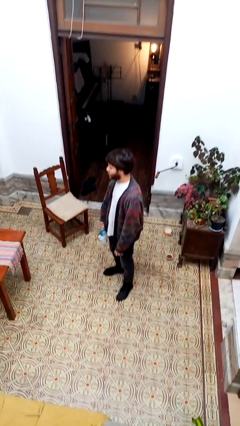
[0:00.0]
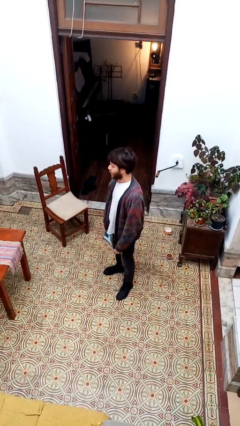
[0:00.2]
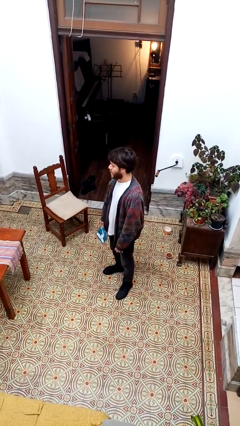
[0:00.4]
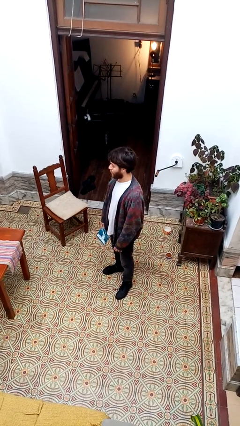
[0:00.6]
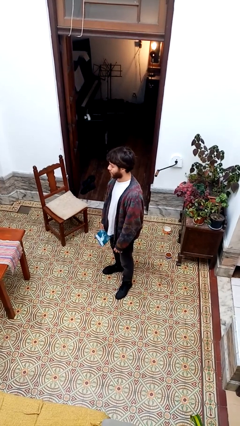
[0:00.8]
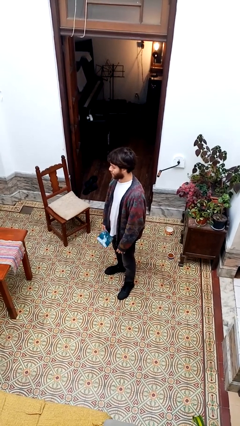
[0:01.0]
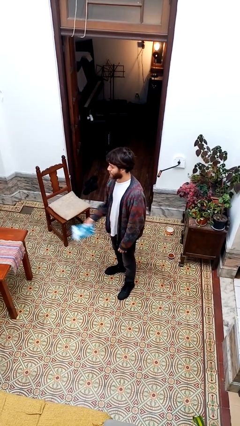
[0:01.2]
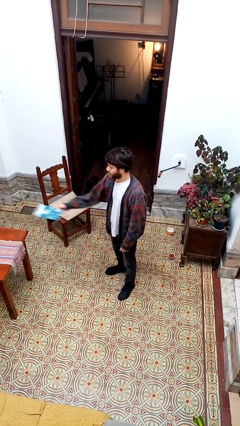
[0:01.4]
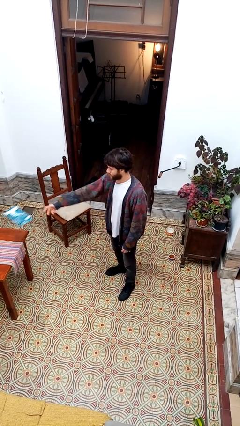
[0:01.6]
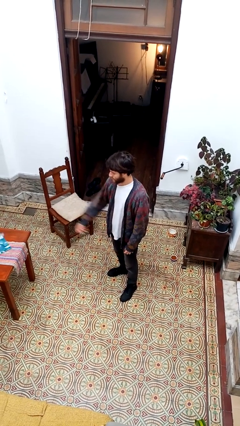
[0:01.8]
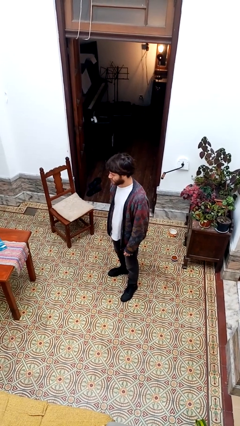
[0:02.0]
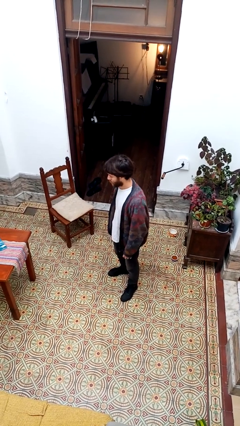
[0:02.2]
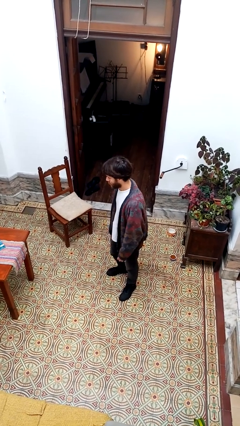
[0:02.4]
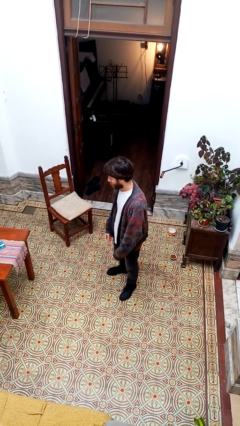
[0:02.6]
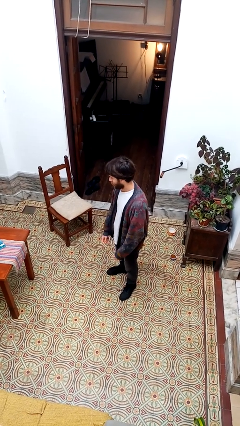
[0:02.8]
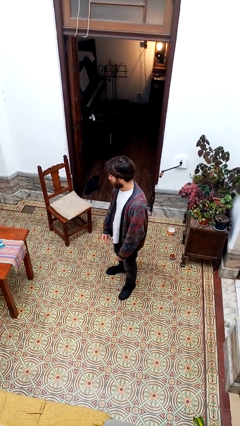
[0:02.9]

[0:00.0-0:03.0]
person throws object on table

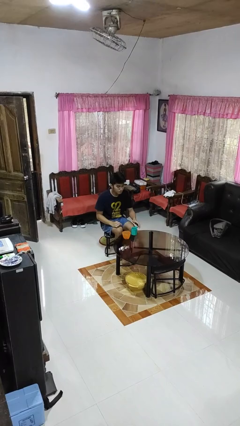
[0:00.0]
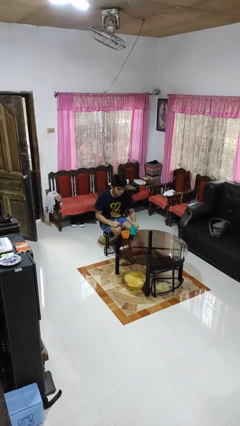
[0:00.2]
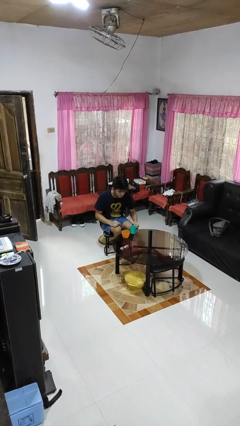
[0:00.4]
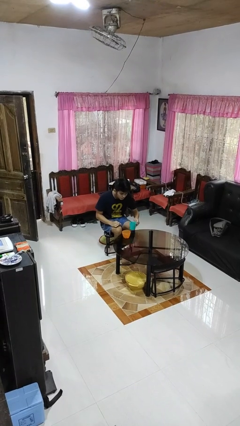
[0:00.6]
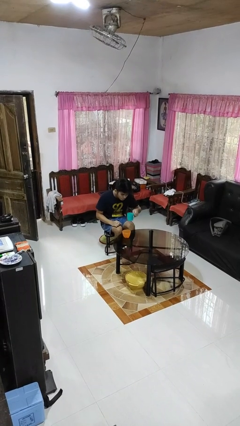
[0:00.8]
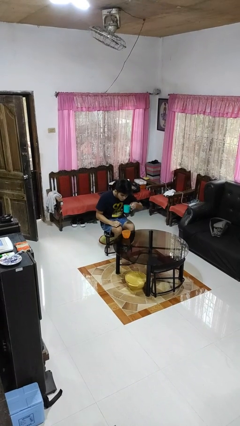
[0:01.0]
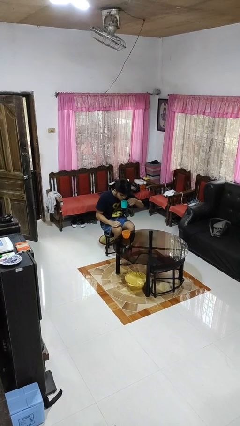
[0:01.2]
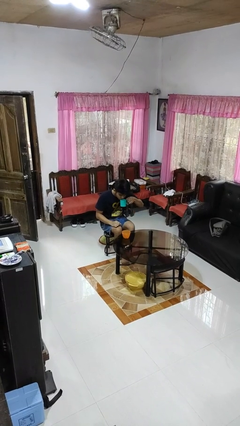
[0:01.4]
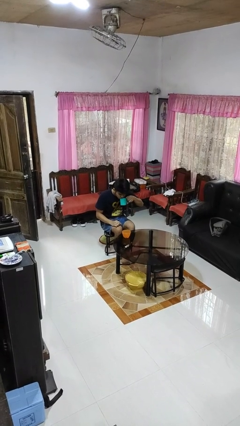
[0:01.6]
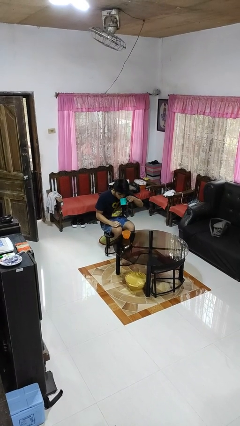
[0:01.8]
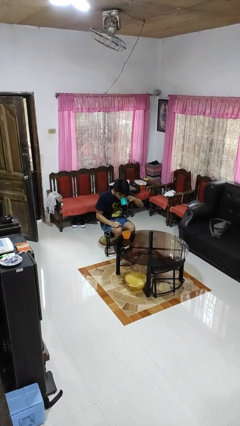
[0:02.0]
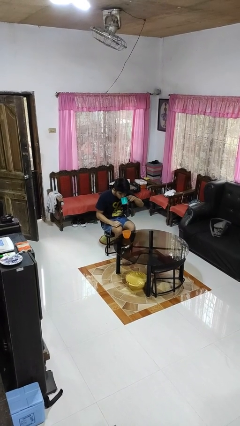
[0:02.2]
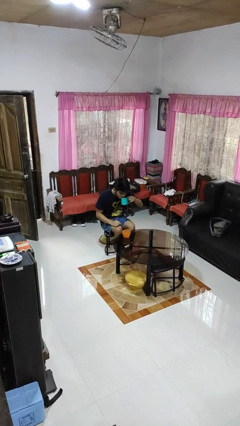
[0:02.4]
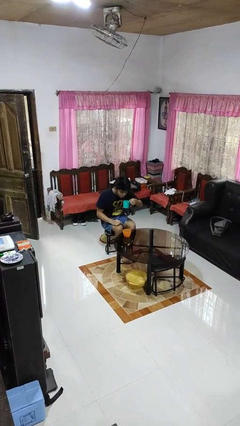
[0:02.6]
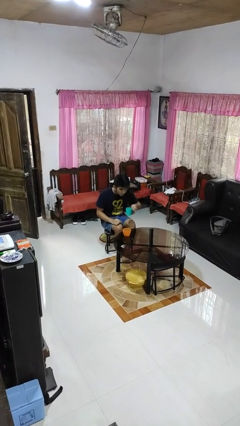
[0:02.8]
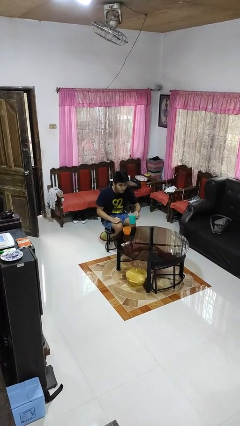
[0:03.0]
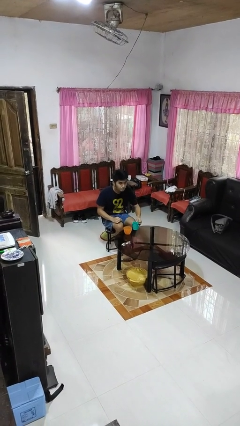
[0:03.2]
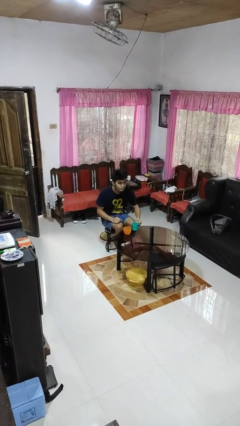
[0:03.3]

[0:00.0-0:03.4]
person drinks from cup

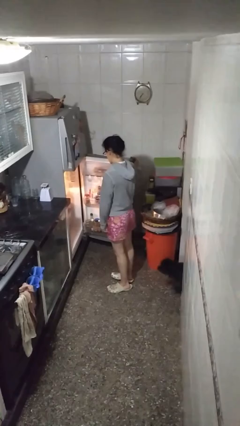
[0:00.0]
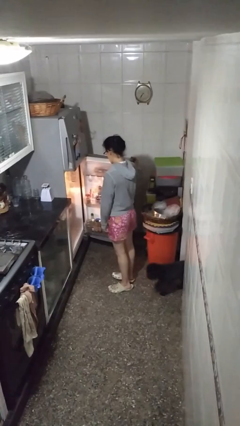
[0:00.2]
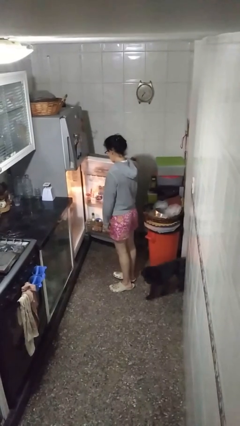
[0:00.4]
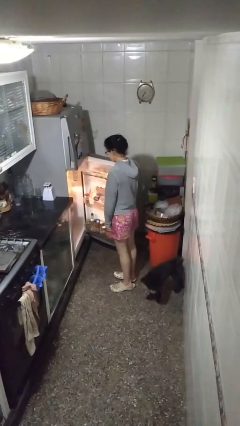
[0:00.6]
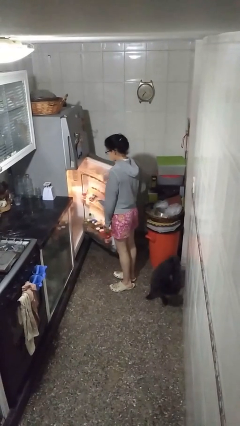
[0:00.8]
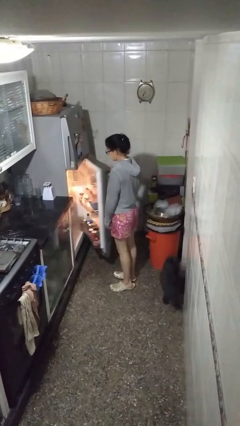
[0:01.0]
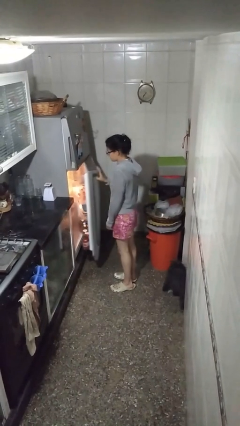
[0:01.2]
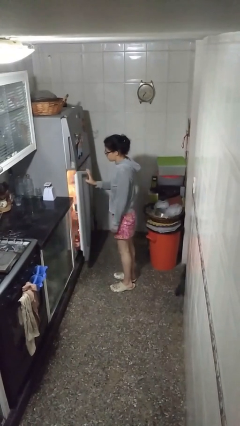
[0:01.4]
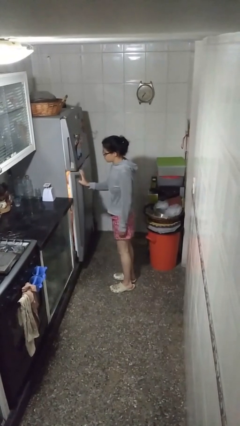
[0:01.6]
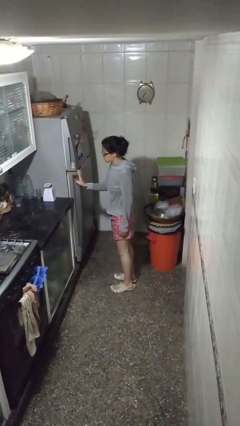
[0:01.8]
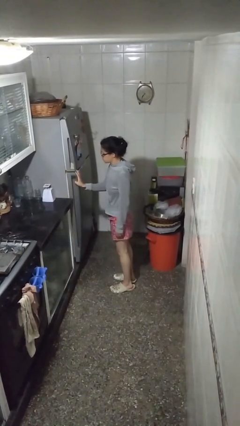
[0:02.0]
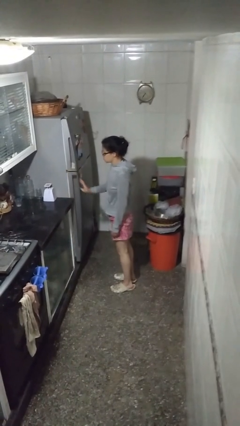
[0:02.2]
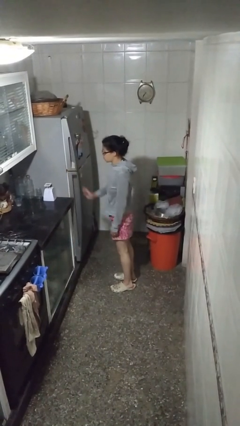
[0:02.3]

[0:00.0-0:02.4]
person closes refrigerator

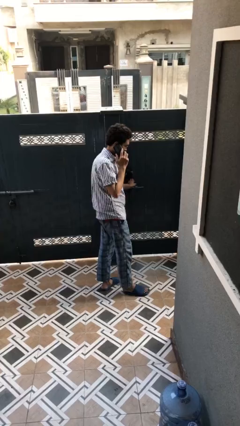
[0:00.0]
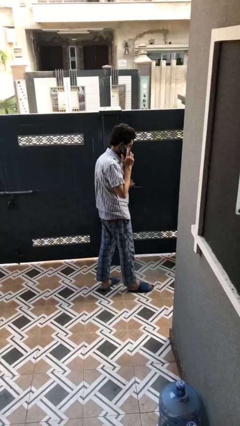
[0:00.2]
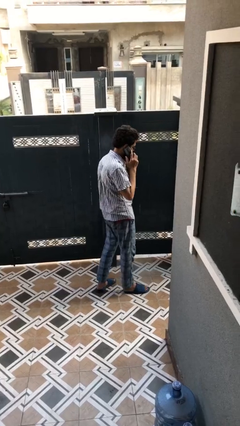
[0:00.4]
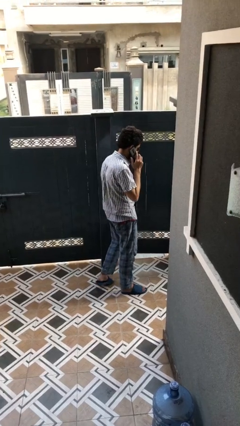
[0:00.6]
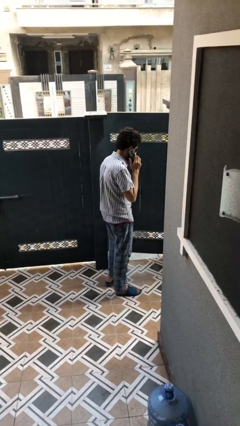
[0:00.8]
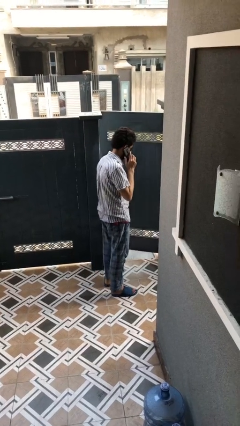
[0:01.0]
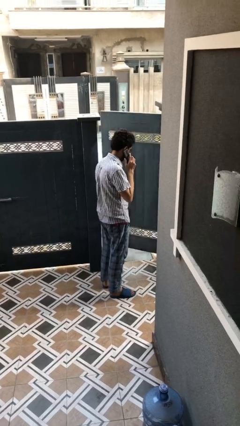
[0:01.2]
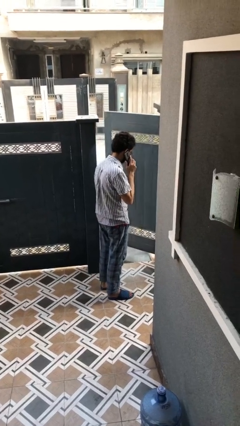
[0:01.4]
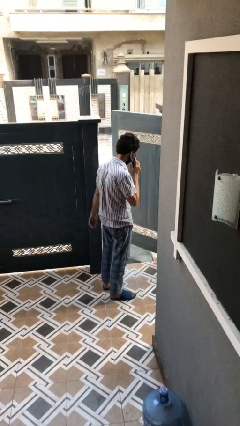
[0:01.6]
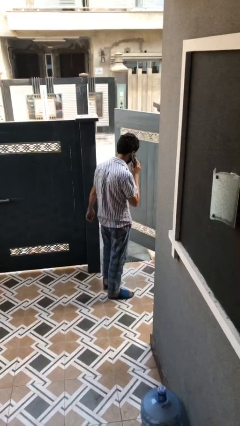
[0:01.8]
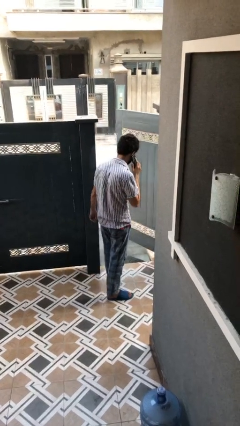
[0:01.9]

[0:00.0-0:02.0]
person opens facility door

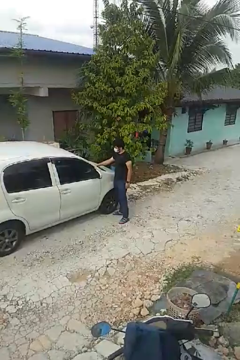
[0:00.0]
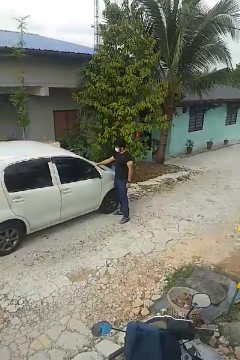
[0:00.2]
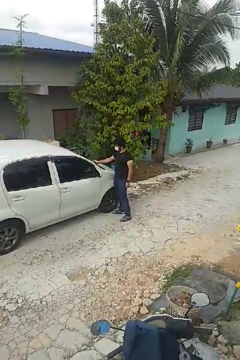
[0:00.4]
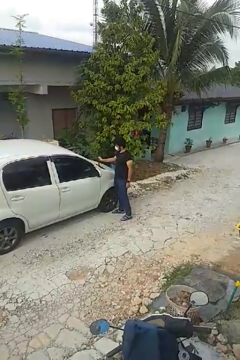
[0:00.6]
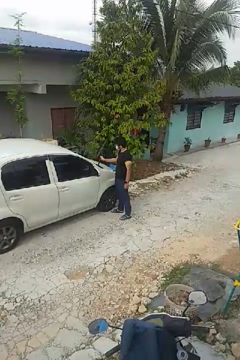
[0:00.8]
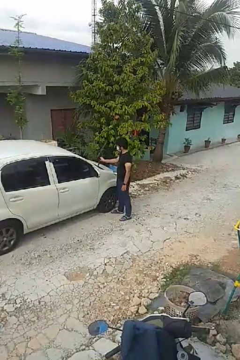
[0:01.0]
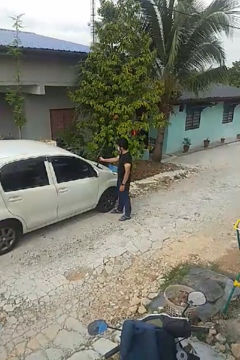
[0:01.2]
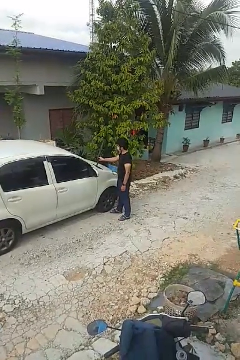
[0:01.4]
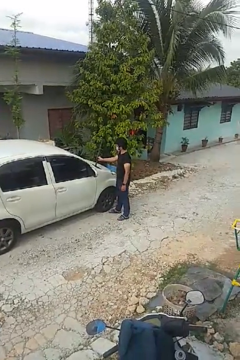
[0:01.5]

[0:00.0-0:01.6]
person flips up car wipers

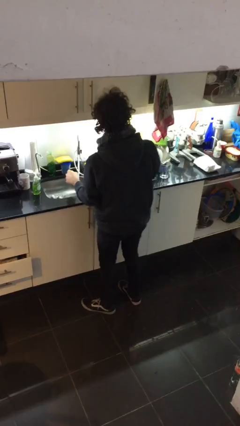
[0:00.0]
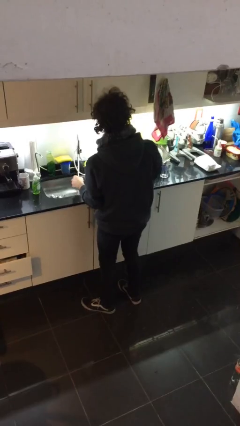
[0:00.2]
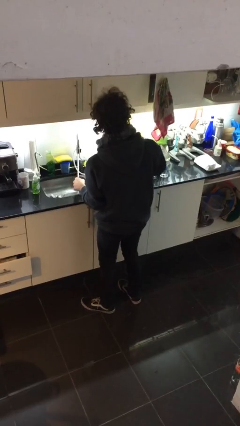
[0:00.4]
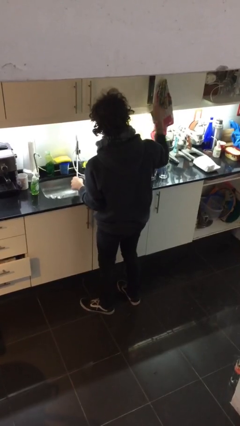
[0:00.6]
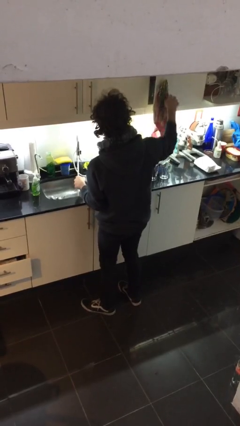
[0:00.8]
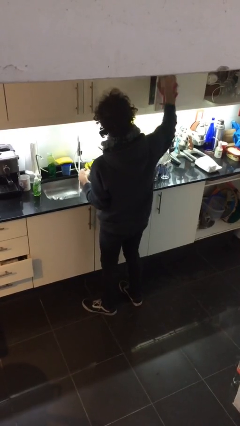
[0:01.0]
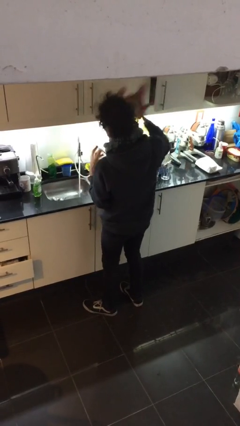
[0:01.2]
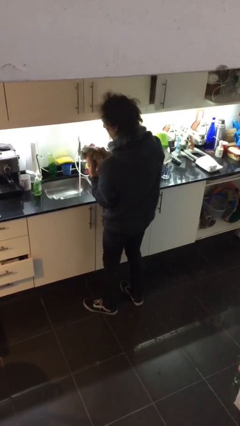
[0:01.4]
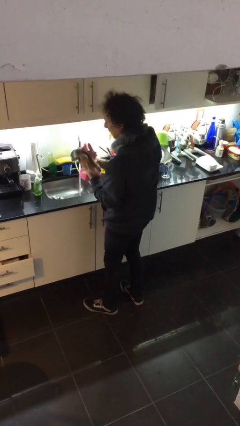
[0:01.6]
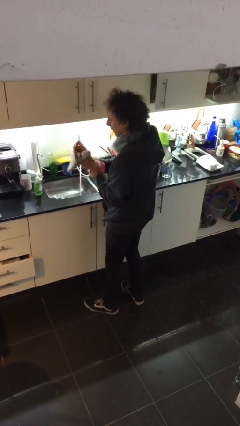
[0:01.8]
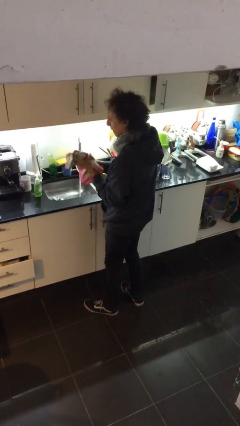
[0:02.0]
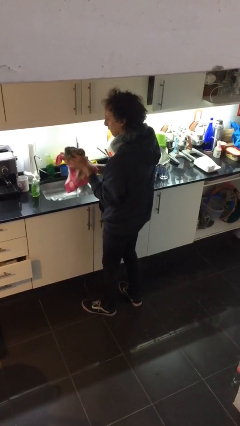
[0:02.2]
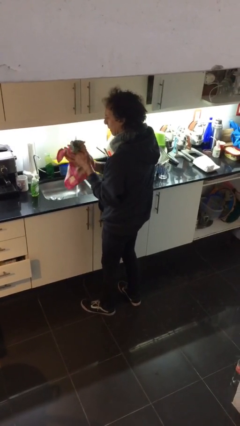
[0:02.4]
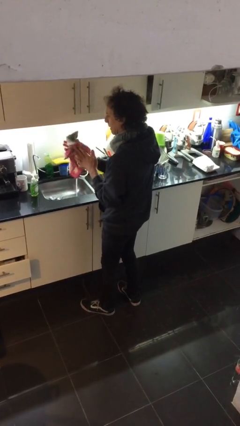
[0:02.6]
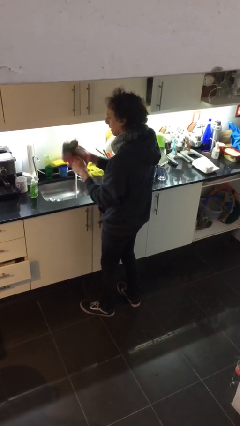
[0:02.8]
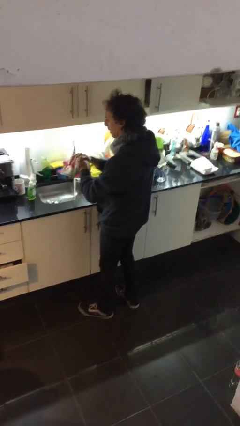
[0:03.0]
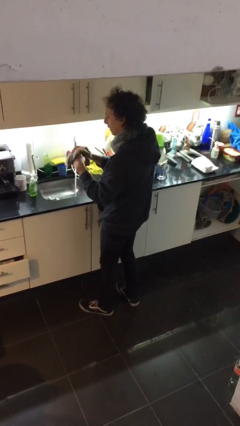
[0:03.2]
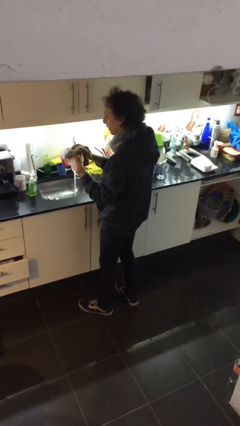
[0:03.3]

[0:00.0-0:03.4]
person dries hands with towel

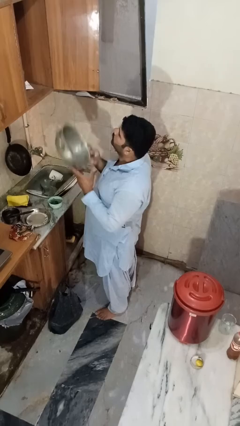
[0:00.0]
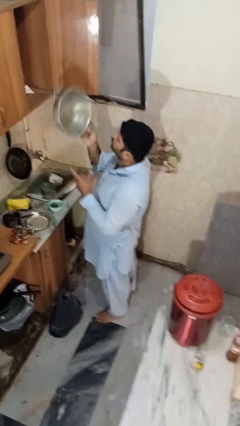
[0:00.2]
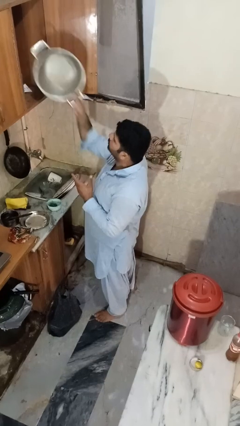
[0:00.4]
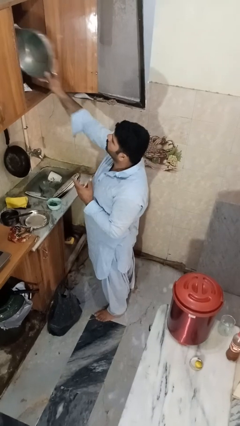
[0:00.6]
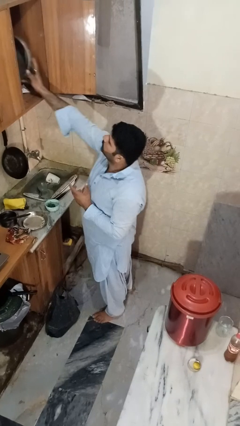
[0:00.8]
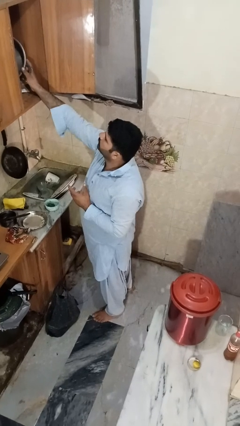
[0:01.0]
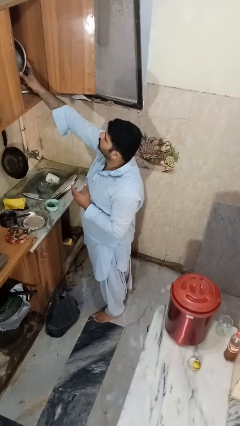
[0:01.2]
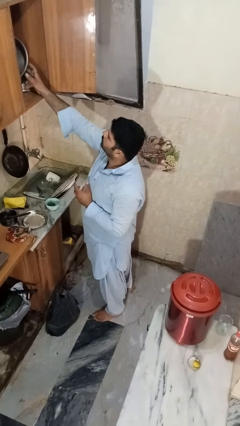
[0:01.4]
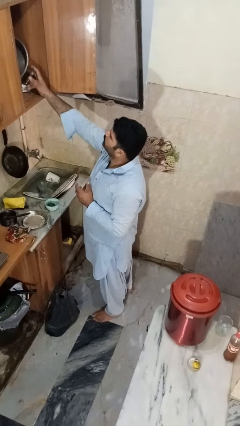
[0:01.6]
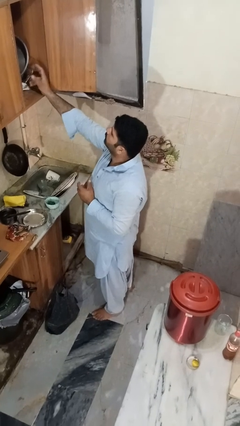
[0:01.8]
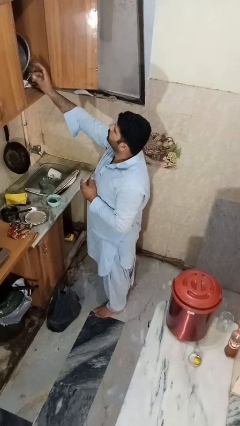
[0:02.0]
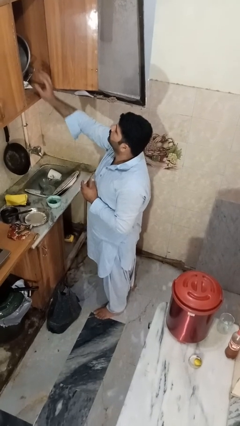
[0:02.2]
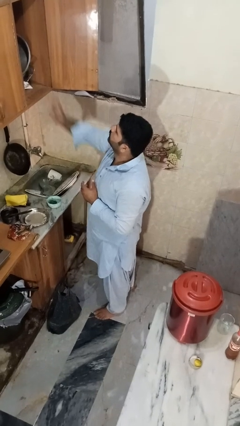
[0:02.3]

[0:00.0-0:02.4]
person puts object in cabinet
